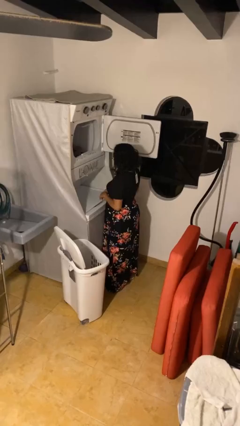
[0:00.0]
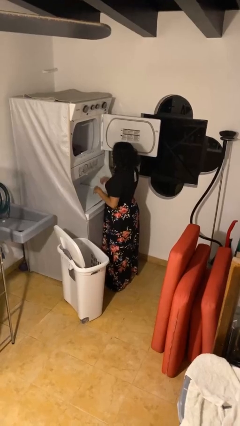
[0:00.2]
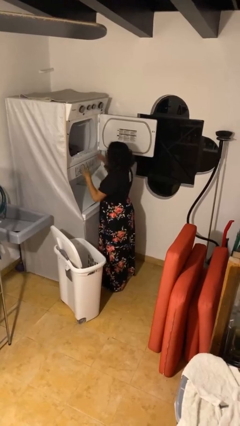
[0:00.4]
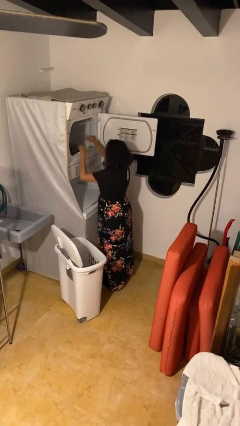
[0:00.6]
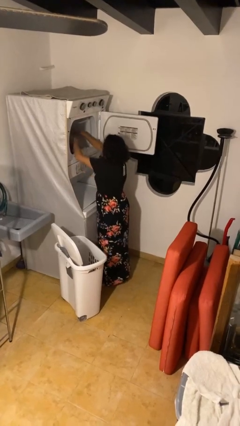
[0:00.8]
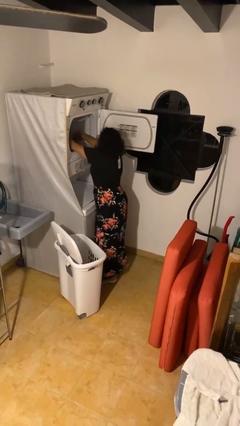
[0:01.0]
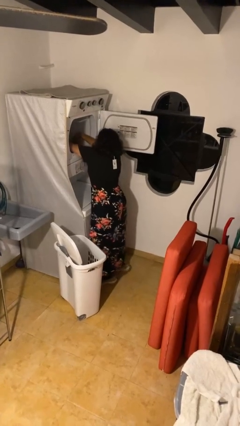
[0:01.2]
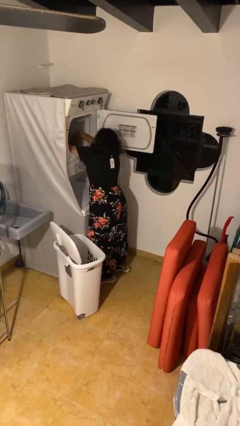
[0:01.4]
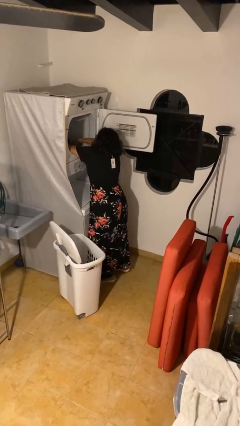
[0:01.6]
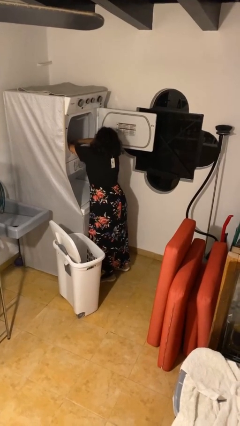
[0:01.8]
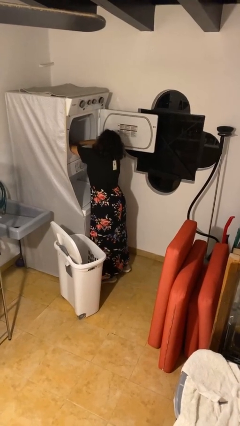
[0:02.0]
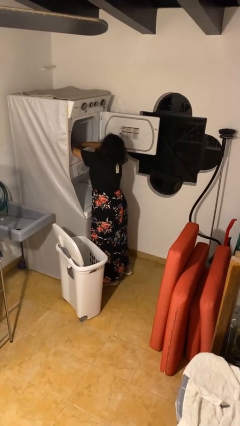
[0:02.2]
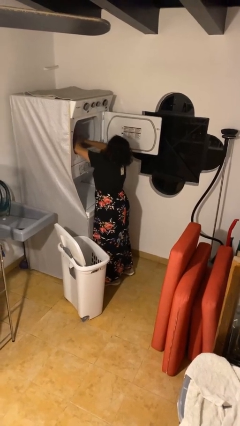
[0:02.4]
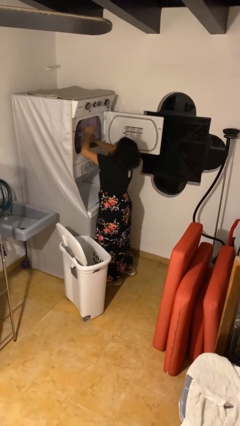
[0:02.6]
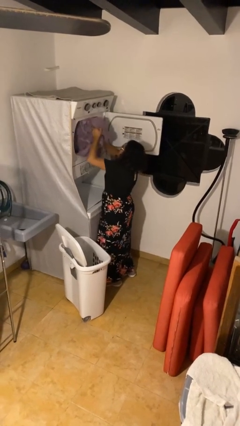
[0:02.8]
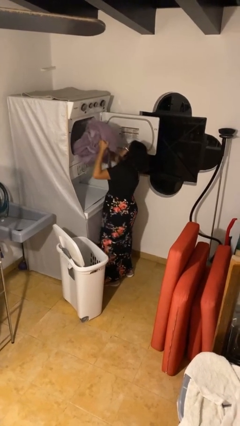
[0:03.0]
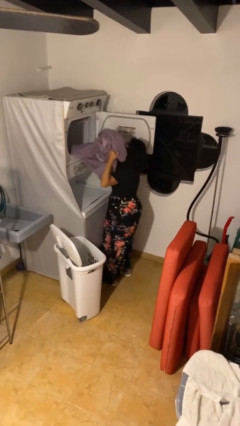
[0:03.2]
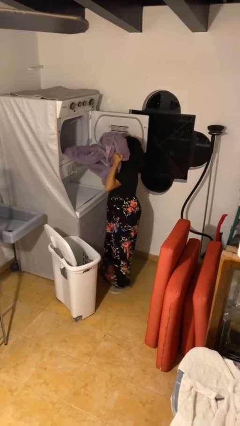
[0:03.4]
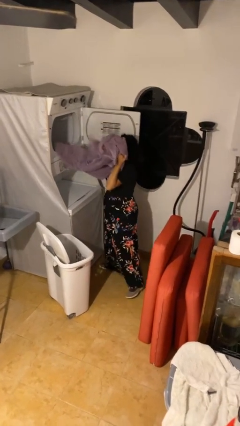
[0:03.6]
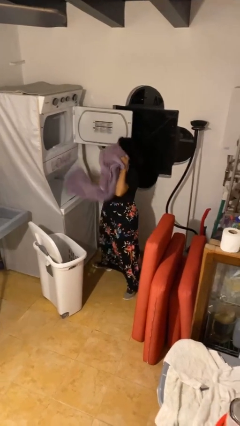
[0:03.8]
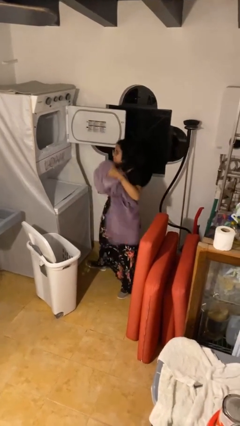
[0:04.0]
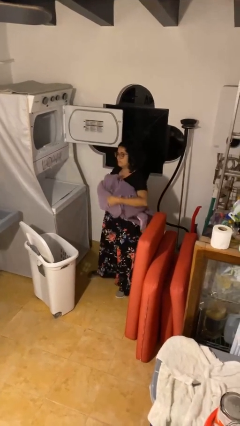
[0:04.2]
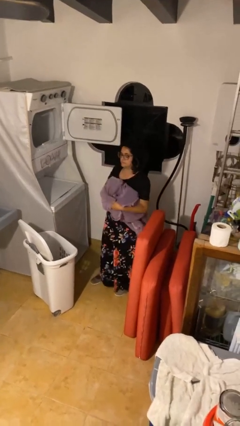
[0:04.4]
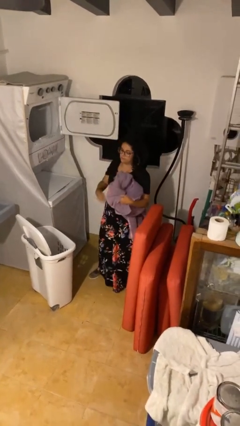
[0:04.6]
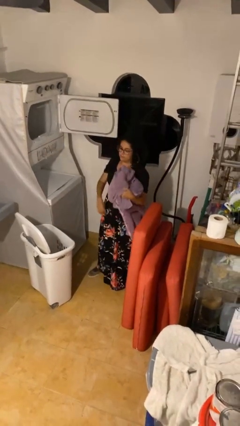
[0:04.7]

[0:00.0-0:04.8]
person unloads dryer

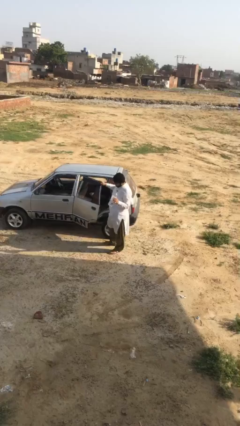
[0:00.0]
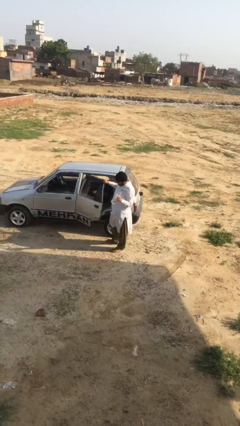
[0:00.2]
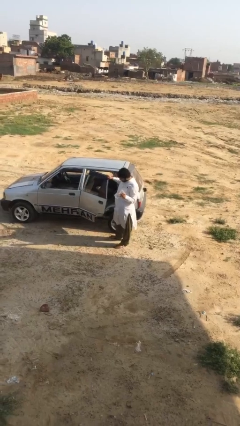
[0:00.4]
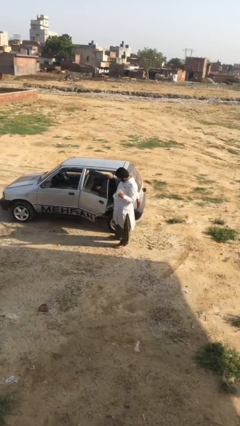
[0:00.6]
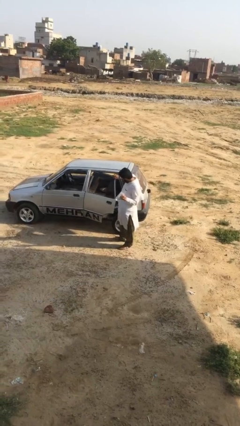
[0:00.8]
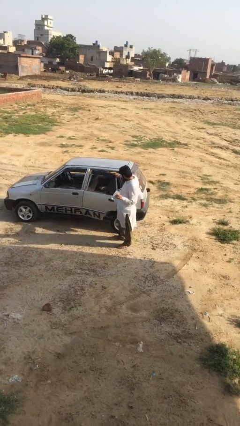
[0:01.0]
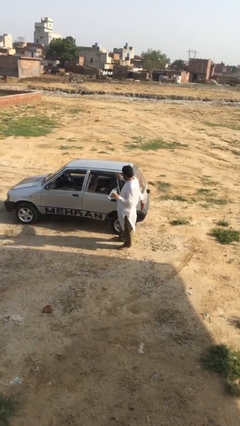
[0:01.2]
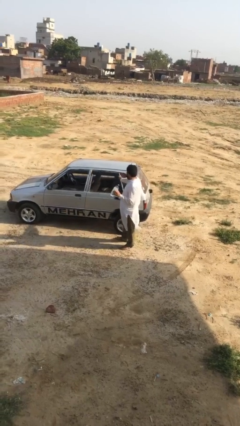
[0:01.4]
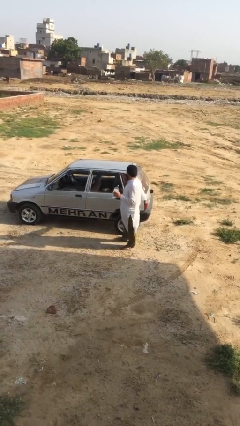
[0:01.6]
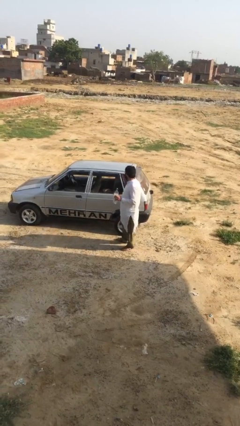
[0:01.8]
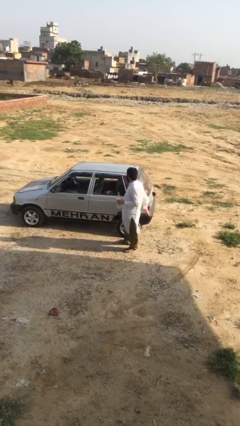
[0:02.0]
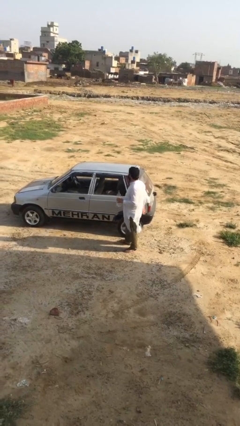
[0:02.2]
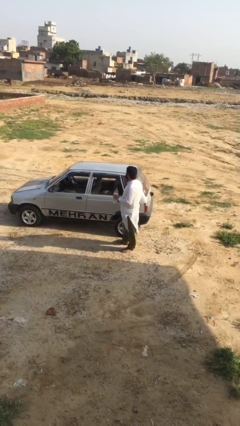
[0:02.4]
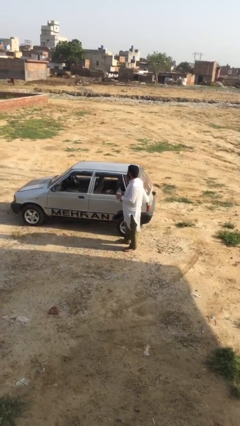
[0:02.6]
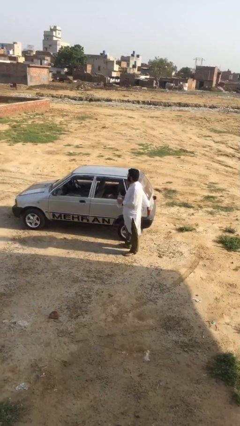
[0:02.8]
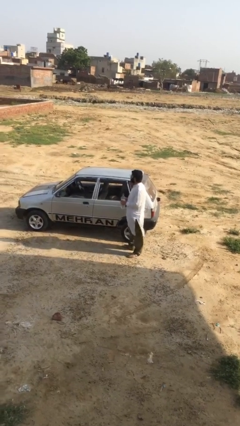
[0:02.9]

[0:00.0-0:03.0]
person closes car door

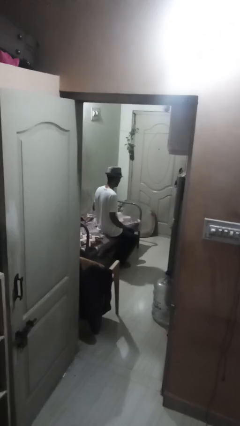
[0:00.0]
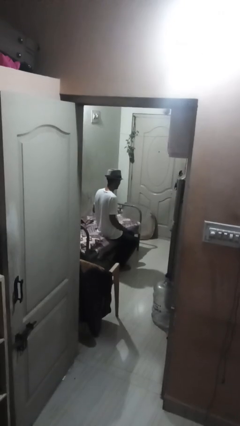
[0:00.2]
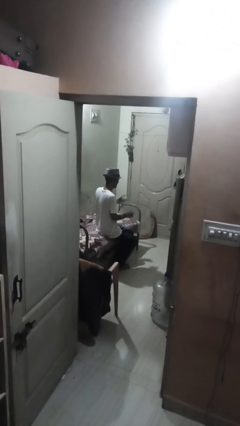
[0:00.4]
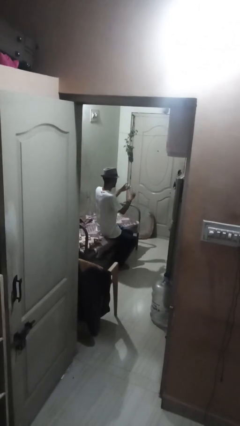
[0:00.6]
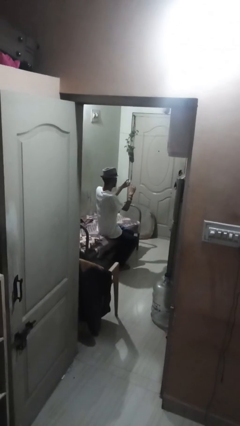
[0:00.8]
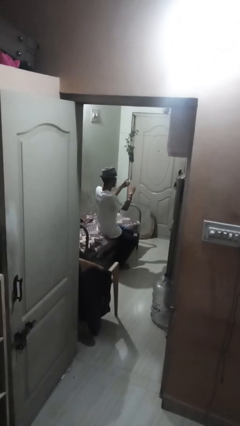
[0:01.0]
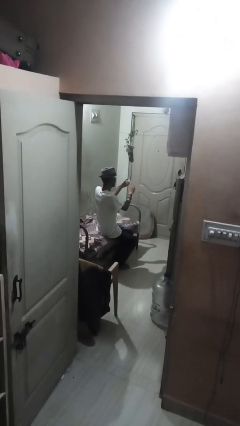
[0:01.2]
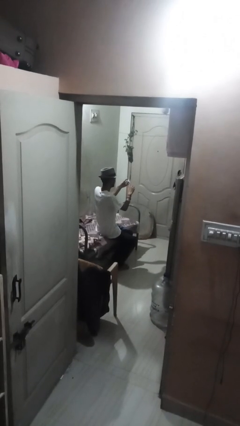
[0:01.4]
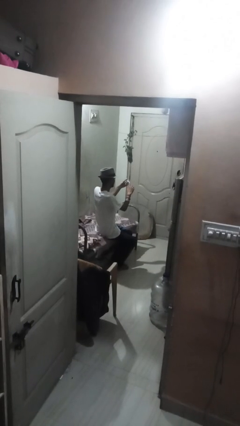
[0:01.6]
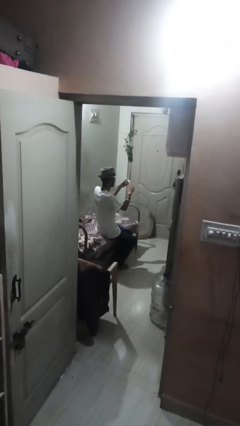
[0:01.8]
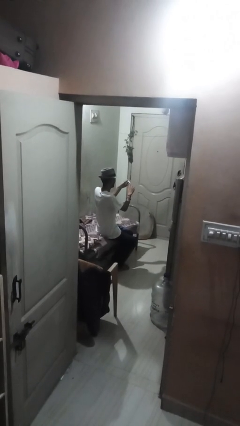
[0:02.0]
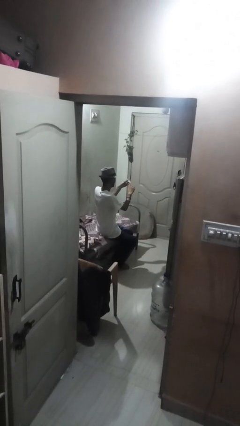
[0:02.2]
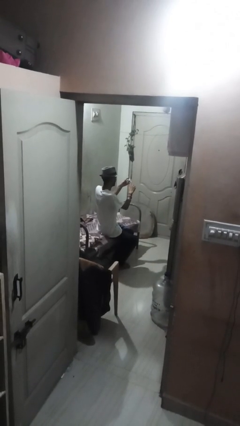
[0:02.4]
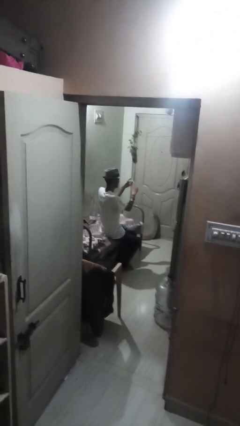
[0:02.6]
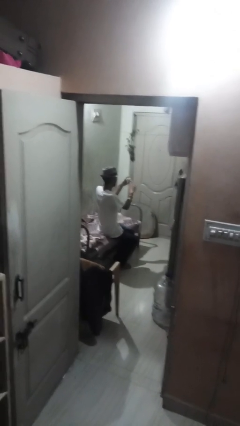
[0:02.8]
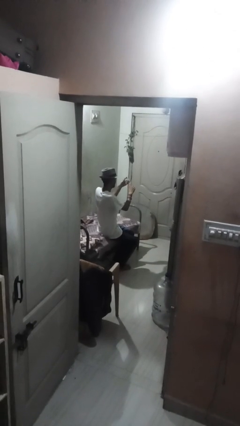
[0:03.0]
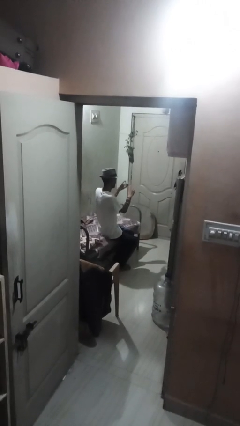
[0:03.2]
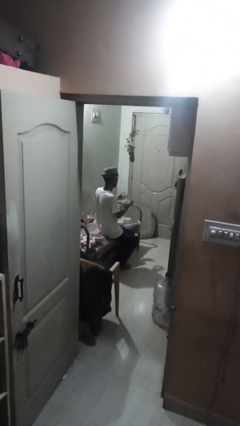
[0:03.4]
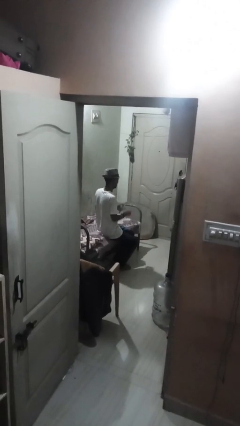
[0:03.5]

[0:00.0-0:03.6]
person clips fingernails

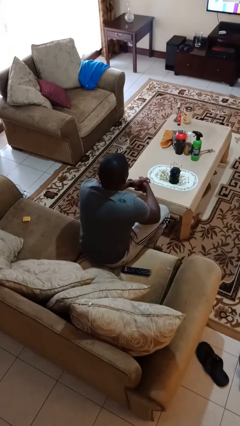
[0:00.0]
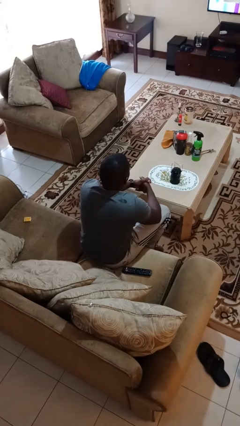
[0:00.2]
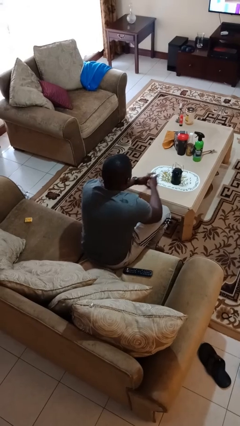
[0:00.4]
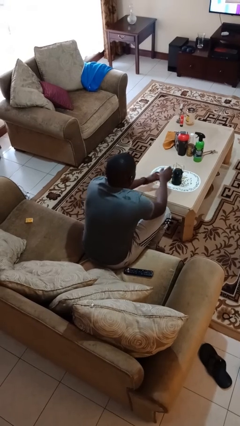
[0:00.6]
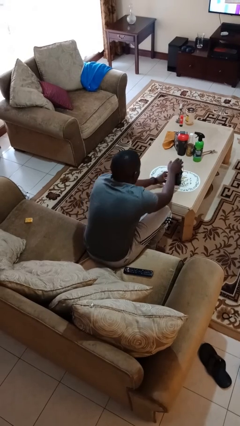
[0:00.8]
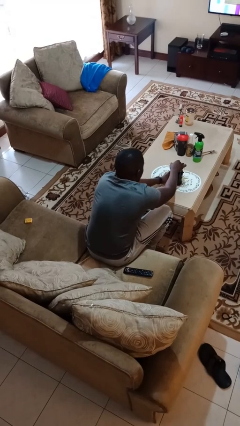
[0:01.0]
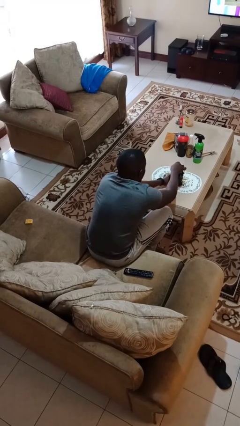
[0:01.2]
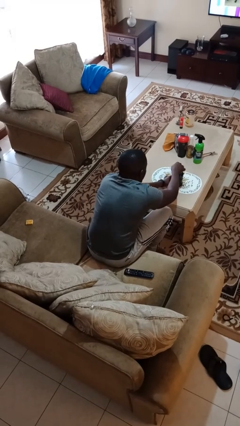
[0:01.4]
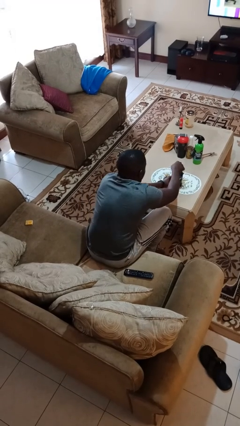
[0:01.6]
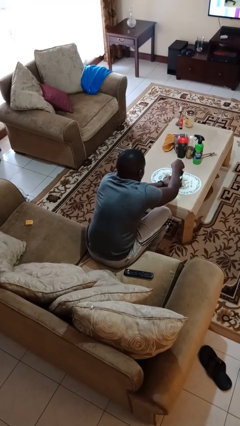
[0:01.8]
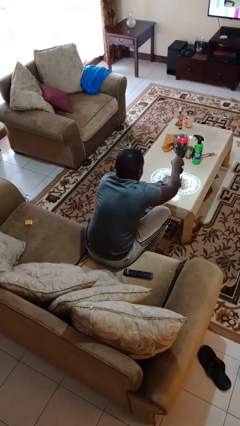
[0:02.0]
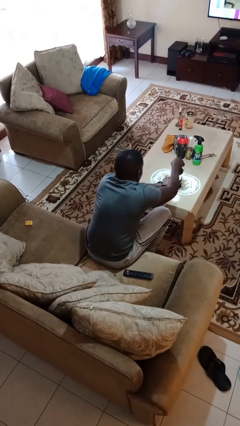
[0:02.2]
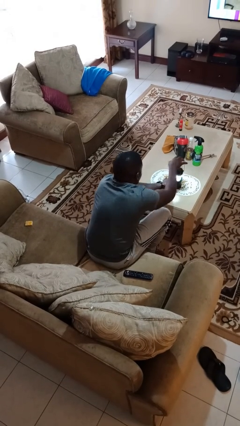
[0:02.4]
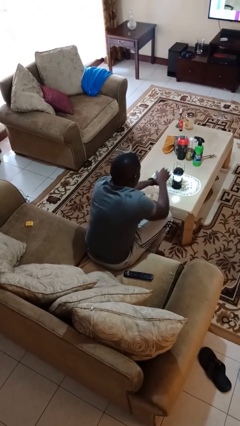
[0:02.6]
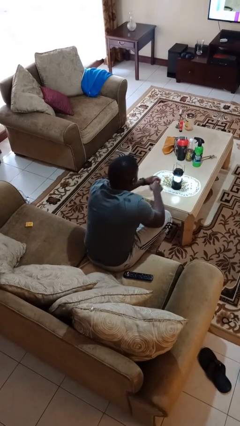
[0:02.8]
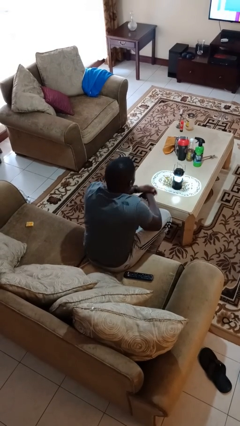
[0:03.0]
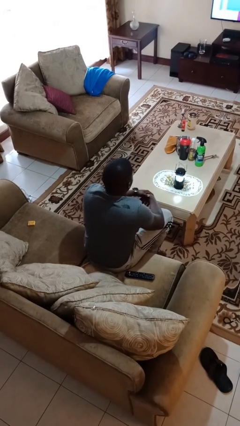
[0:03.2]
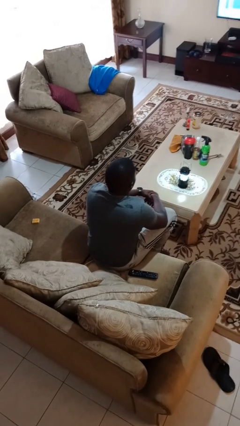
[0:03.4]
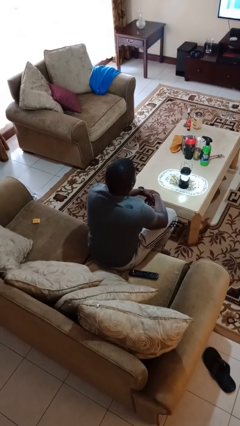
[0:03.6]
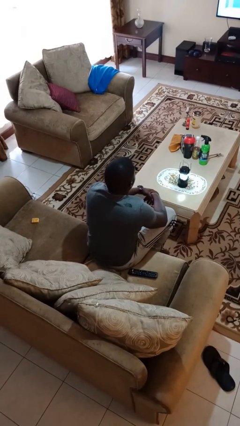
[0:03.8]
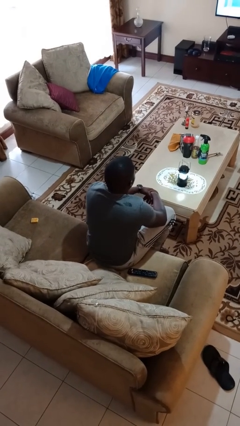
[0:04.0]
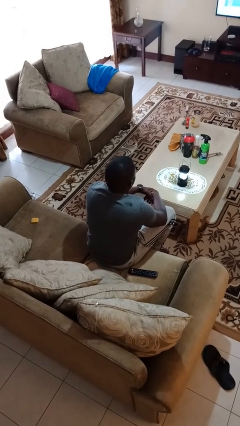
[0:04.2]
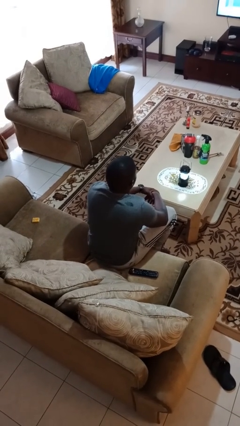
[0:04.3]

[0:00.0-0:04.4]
person turns on lamp

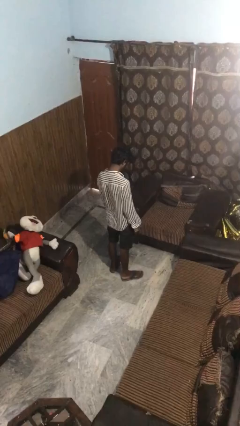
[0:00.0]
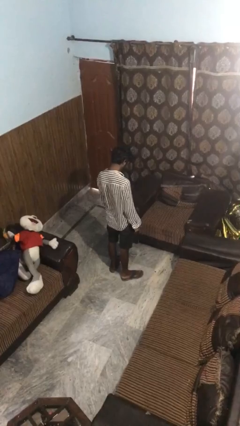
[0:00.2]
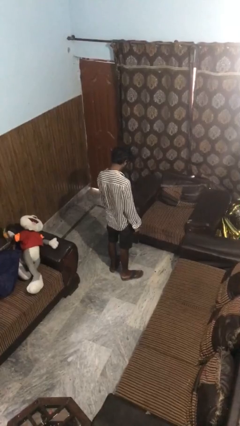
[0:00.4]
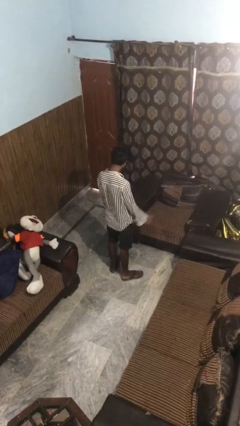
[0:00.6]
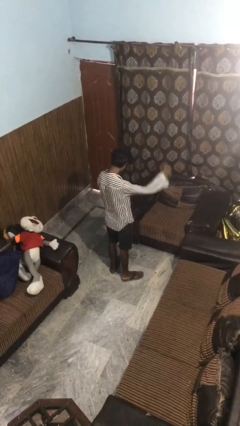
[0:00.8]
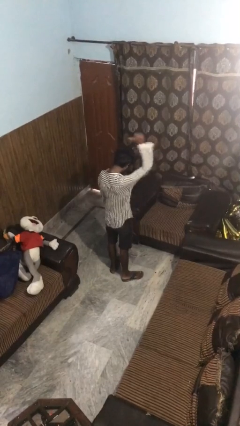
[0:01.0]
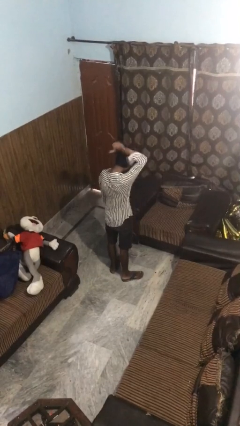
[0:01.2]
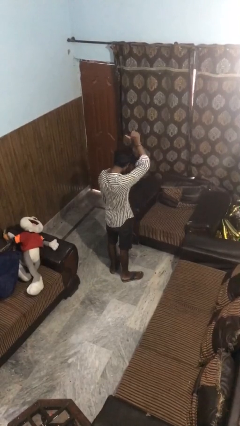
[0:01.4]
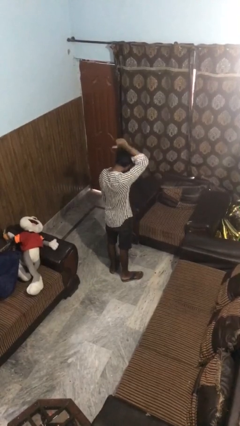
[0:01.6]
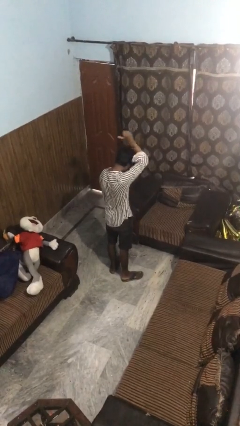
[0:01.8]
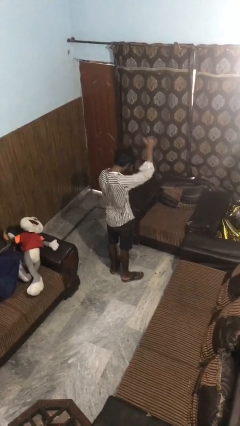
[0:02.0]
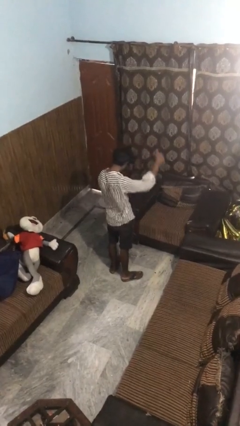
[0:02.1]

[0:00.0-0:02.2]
person gestures behind me
